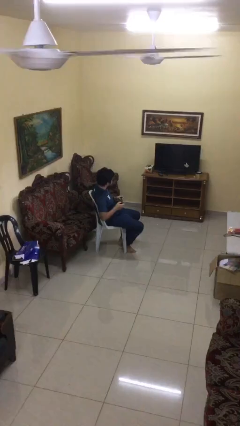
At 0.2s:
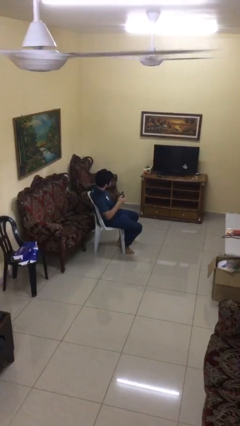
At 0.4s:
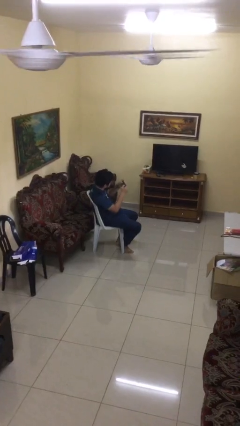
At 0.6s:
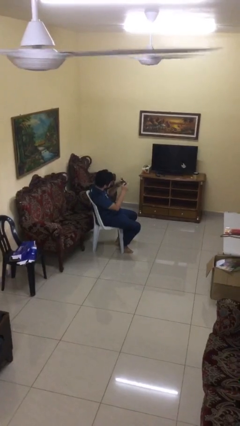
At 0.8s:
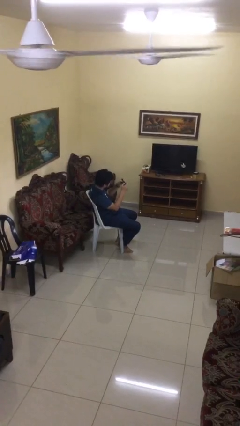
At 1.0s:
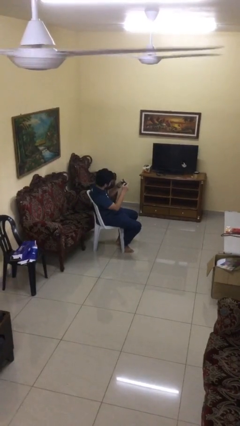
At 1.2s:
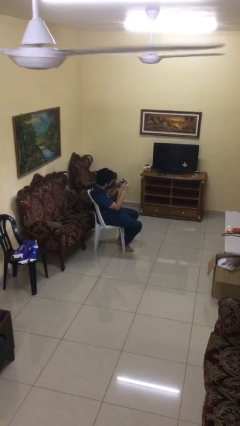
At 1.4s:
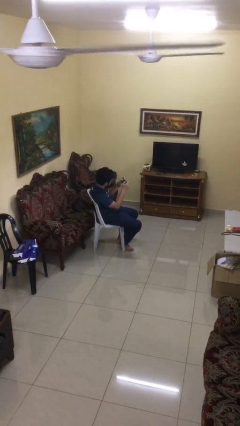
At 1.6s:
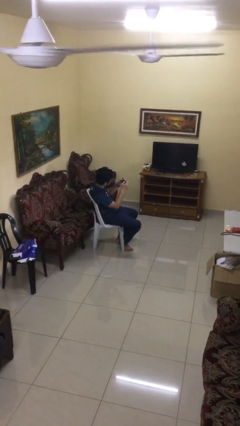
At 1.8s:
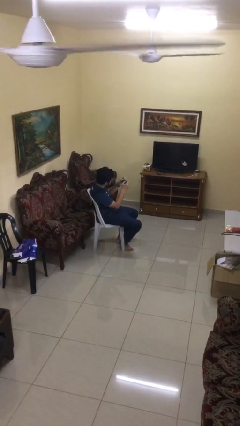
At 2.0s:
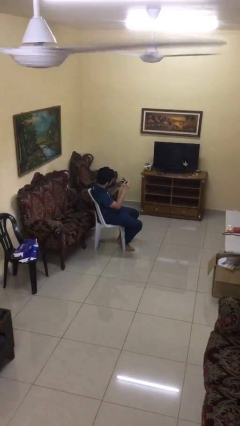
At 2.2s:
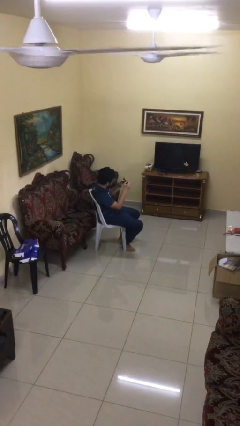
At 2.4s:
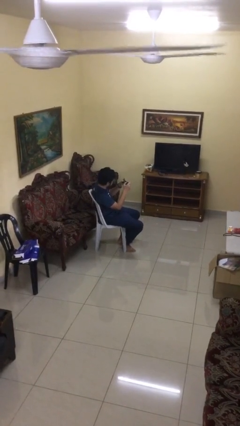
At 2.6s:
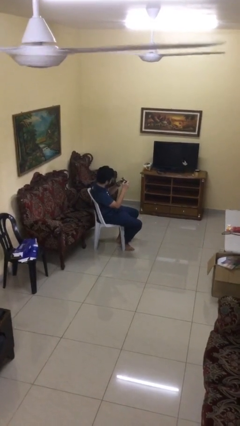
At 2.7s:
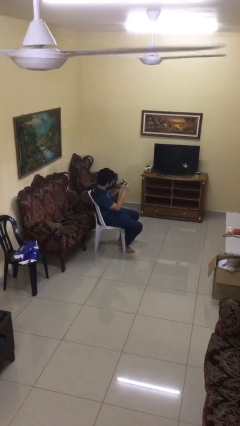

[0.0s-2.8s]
person interacts with handheld game

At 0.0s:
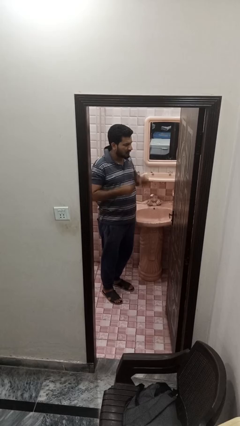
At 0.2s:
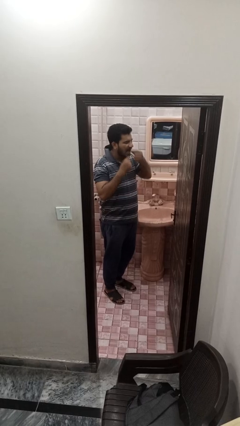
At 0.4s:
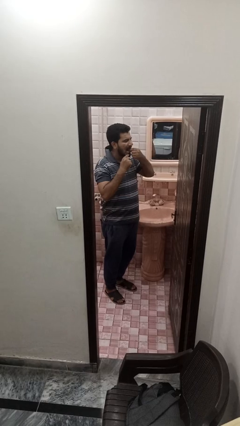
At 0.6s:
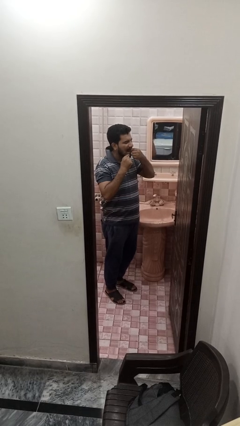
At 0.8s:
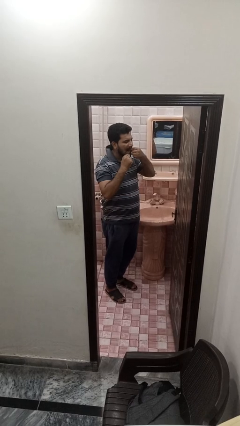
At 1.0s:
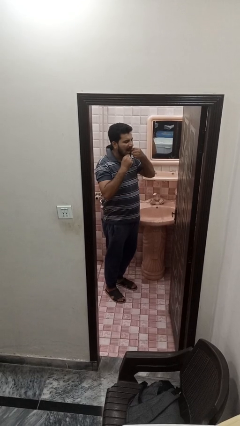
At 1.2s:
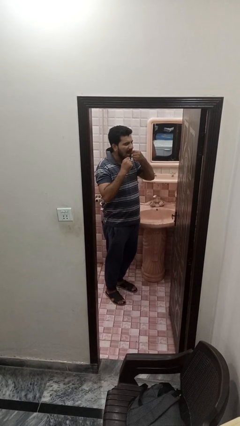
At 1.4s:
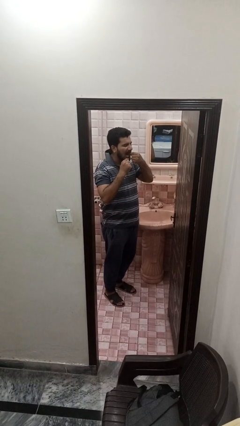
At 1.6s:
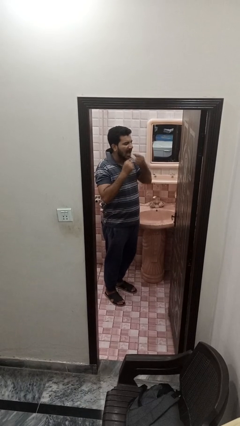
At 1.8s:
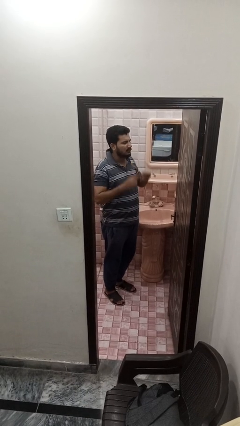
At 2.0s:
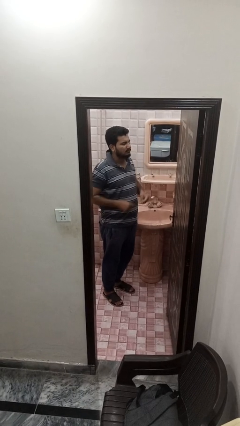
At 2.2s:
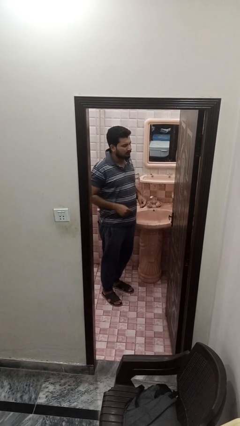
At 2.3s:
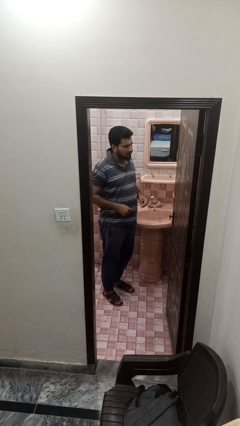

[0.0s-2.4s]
person flosses

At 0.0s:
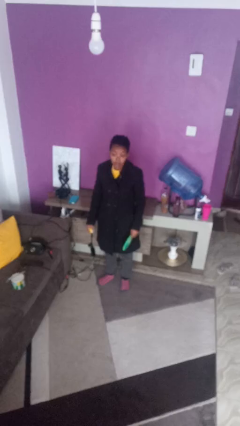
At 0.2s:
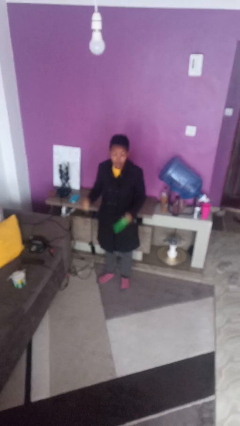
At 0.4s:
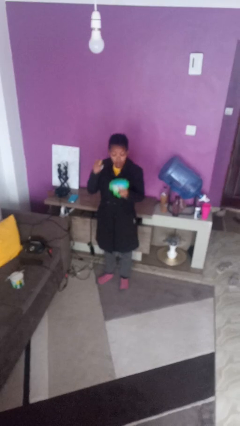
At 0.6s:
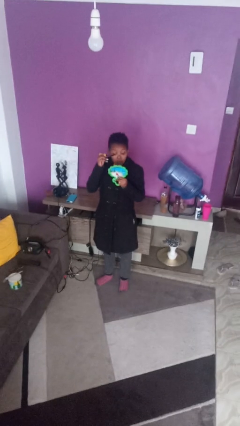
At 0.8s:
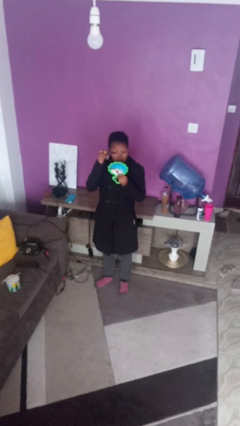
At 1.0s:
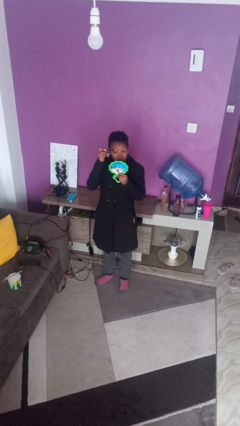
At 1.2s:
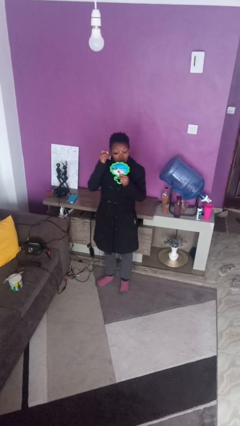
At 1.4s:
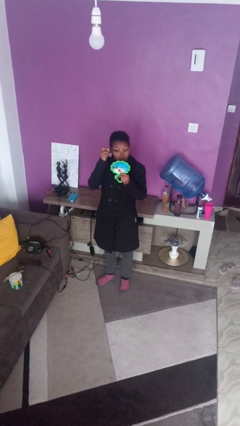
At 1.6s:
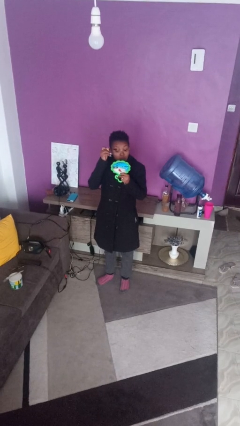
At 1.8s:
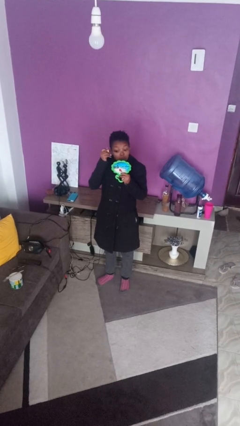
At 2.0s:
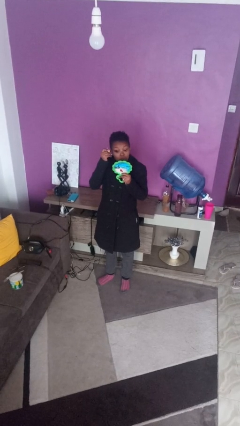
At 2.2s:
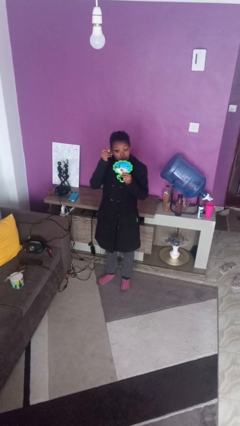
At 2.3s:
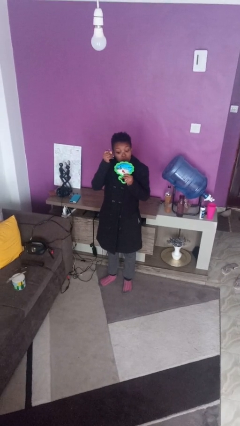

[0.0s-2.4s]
person applies eye makeup

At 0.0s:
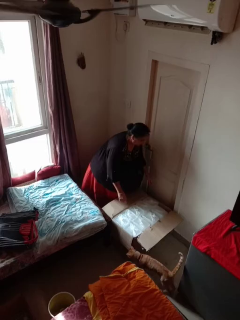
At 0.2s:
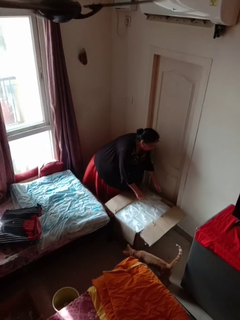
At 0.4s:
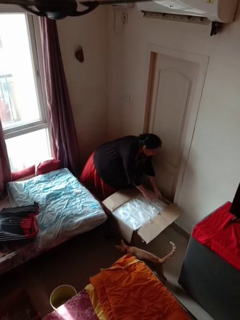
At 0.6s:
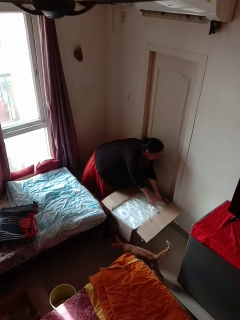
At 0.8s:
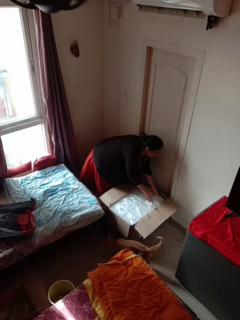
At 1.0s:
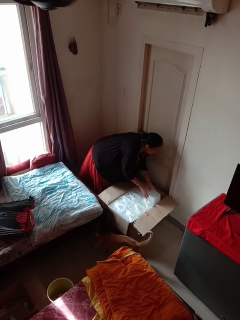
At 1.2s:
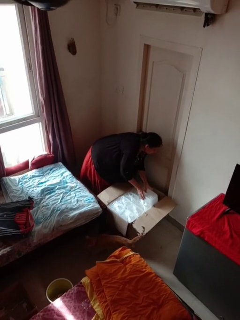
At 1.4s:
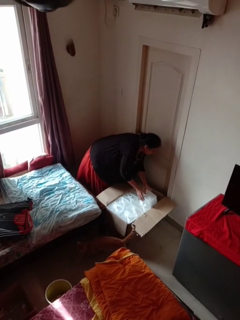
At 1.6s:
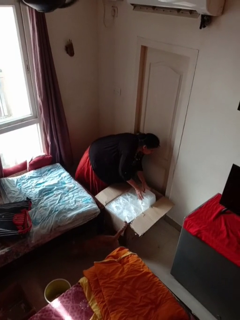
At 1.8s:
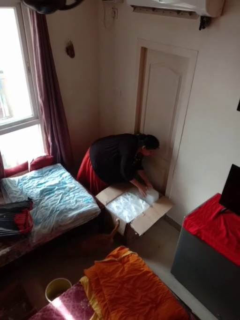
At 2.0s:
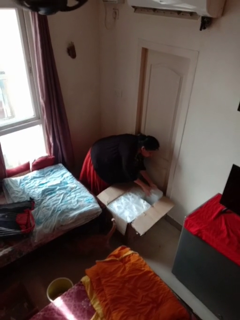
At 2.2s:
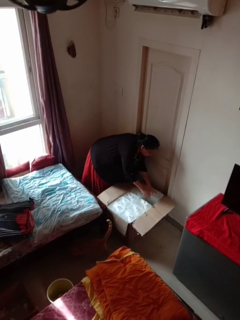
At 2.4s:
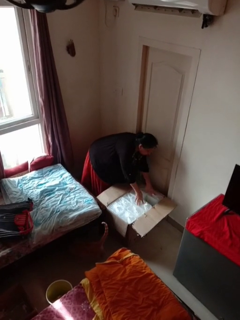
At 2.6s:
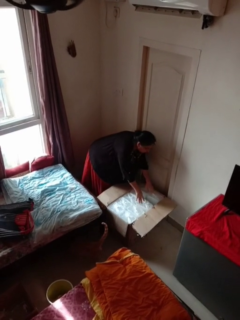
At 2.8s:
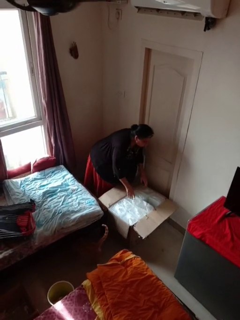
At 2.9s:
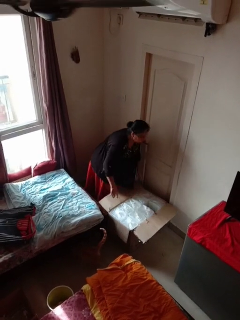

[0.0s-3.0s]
person searches in box

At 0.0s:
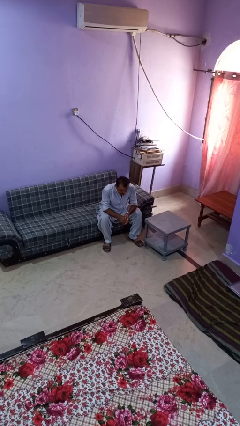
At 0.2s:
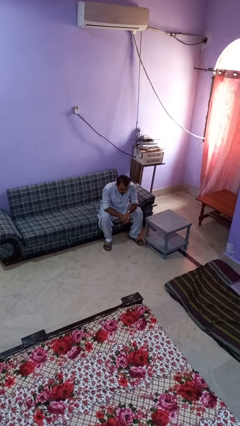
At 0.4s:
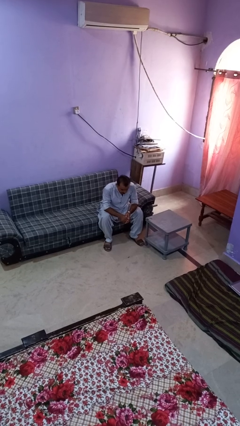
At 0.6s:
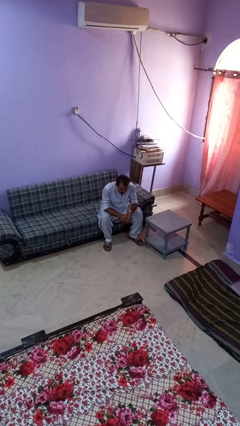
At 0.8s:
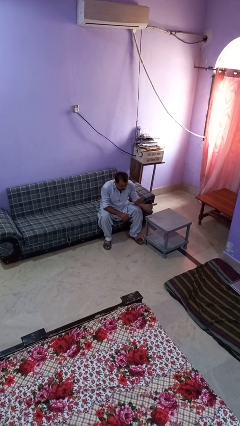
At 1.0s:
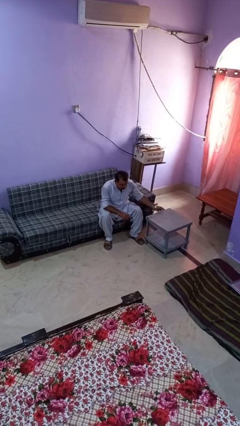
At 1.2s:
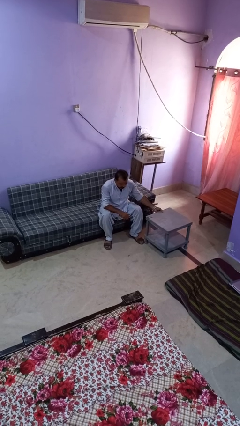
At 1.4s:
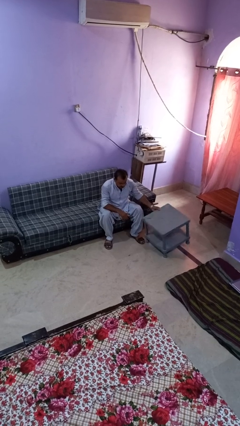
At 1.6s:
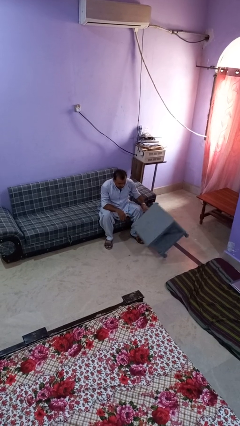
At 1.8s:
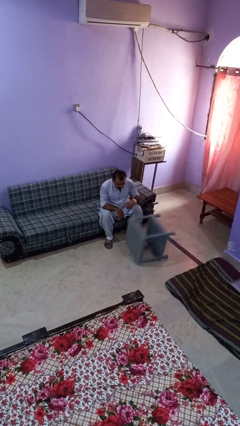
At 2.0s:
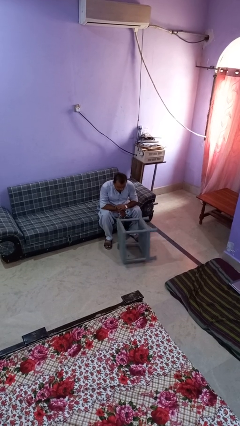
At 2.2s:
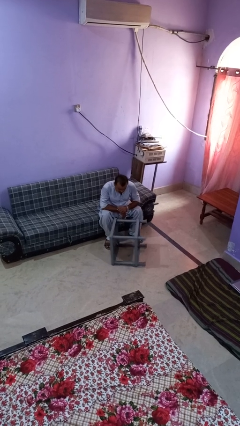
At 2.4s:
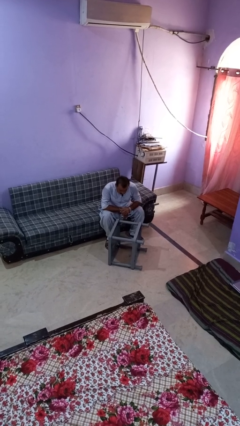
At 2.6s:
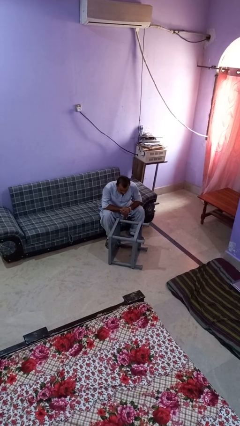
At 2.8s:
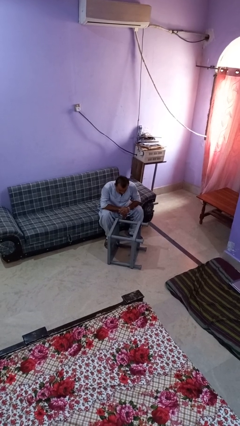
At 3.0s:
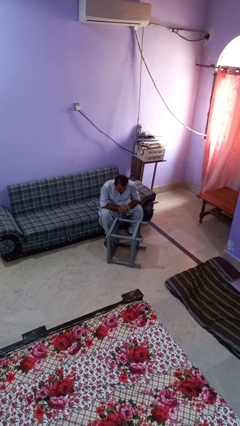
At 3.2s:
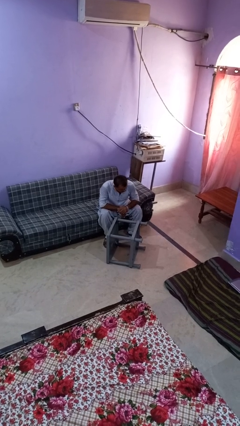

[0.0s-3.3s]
person knocks over furniture

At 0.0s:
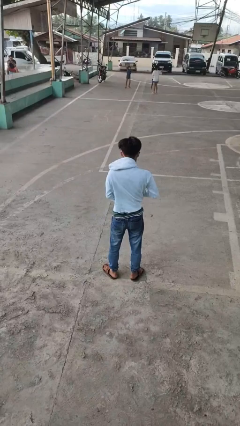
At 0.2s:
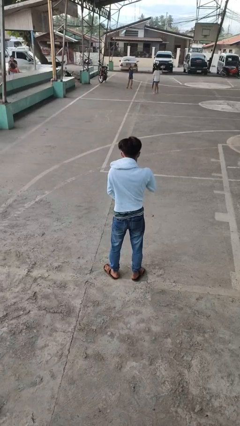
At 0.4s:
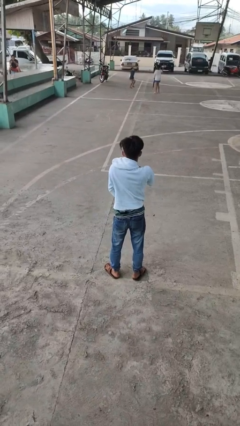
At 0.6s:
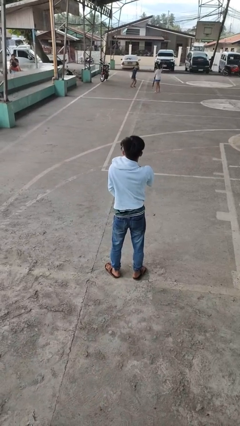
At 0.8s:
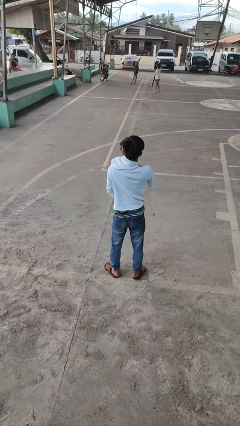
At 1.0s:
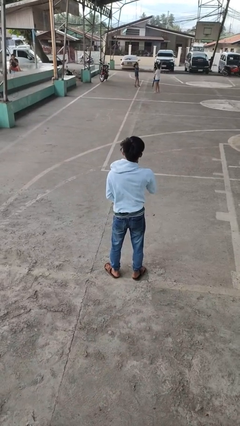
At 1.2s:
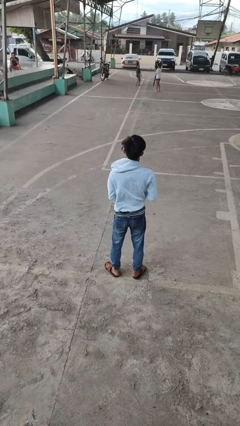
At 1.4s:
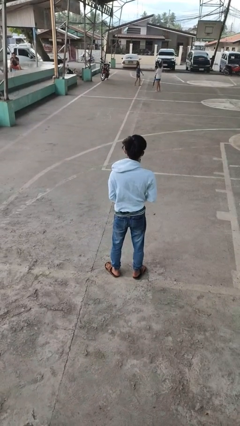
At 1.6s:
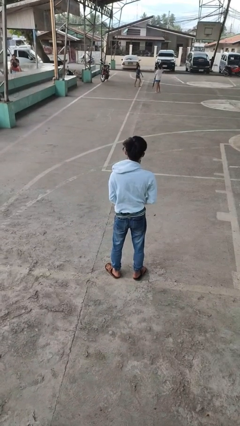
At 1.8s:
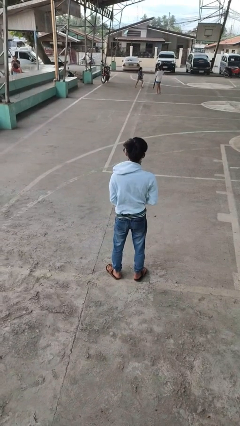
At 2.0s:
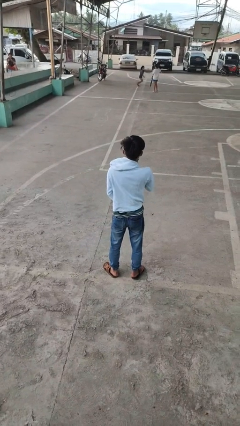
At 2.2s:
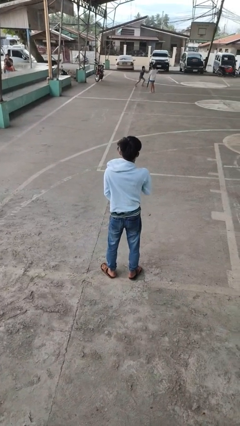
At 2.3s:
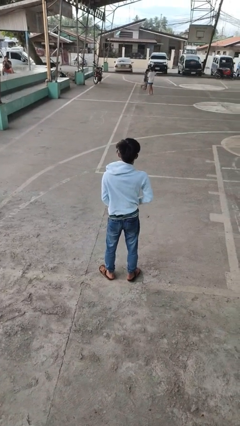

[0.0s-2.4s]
person zips up jacket

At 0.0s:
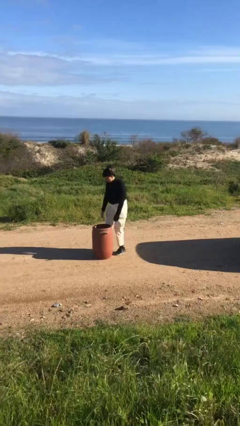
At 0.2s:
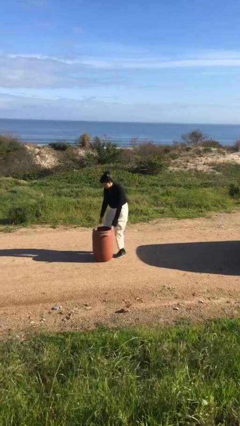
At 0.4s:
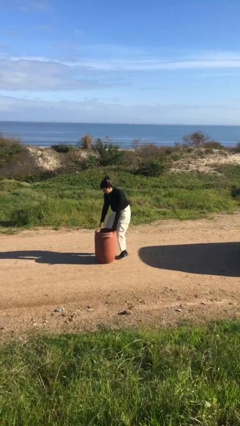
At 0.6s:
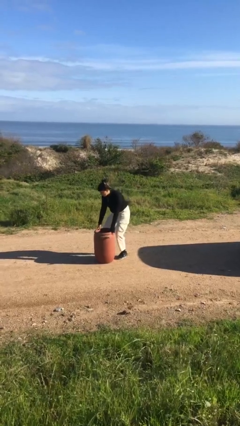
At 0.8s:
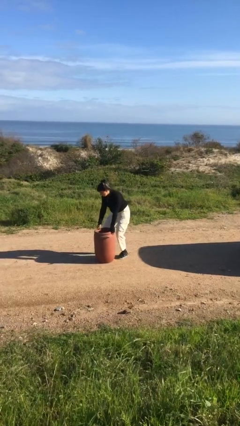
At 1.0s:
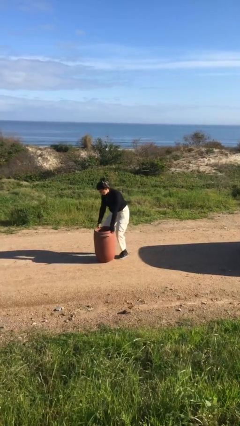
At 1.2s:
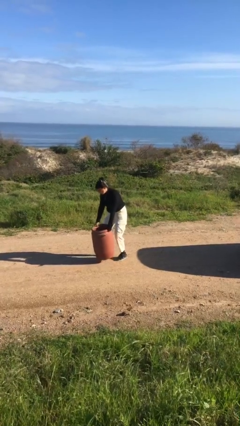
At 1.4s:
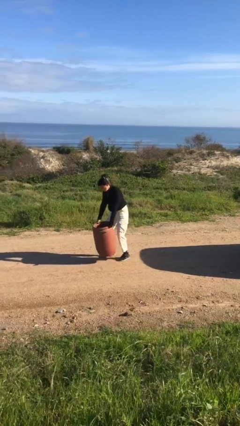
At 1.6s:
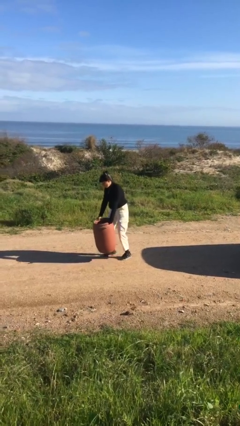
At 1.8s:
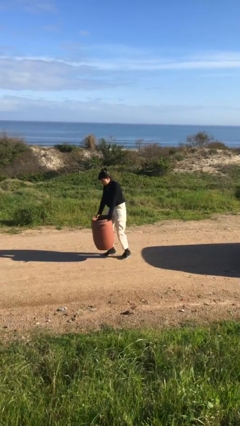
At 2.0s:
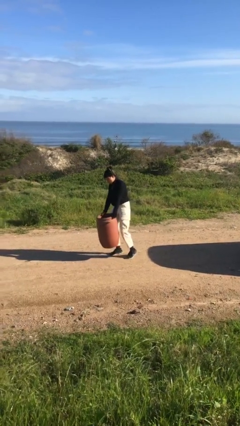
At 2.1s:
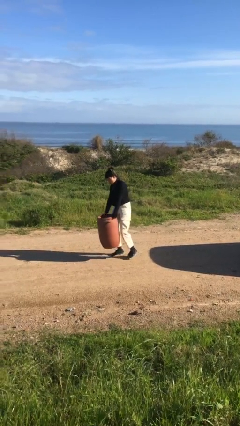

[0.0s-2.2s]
person picks up object from floor
